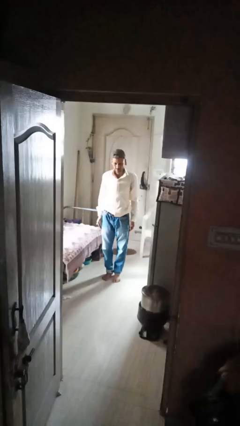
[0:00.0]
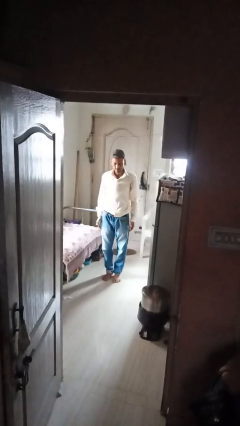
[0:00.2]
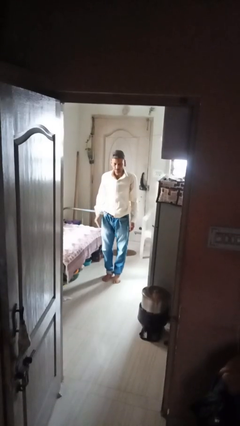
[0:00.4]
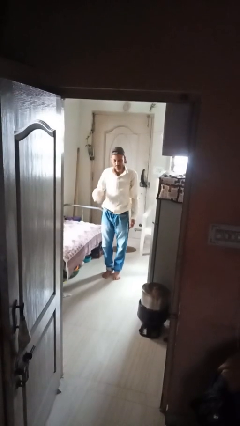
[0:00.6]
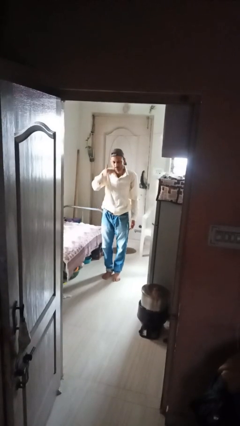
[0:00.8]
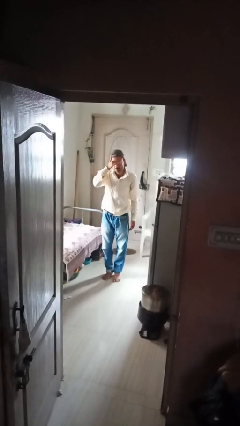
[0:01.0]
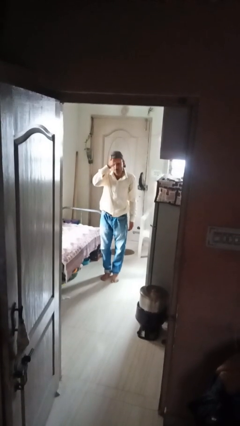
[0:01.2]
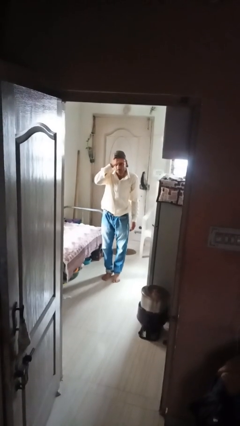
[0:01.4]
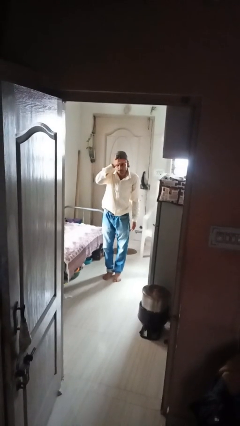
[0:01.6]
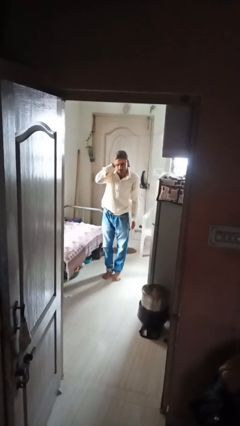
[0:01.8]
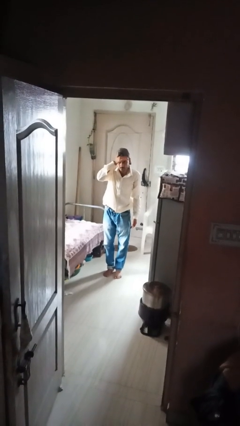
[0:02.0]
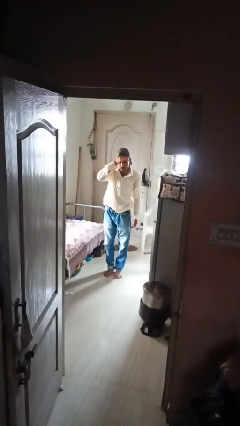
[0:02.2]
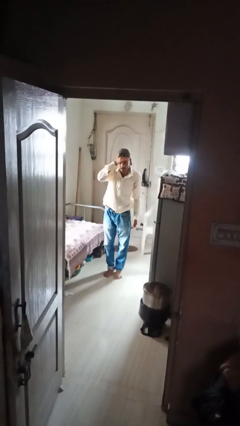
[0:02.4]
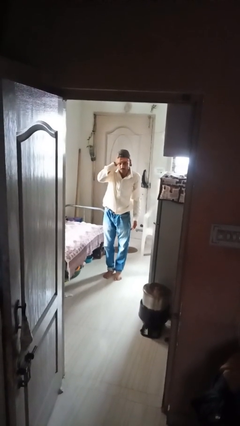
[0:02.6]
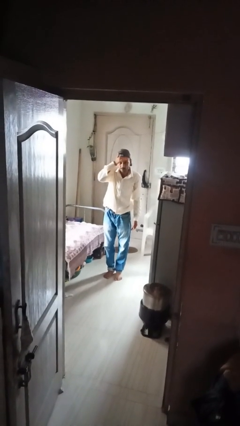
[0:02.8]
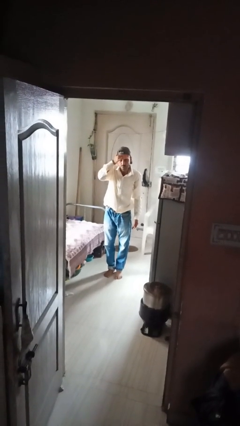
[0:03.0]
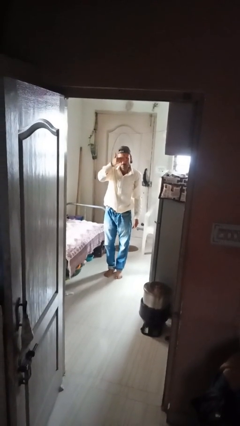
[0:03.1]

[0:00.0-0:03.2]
person shades eyes

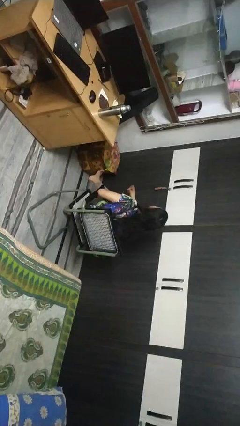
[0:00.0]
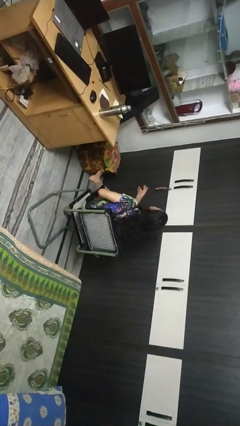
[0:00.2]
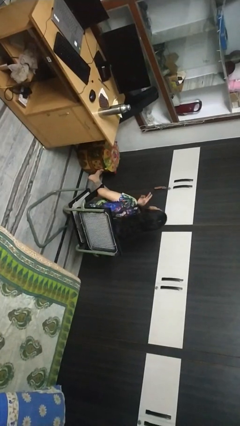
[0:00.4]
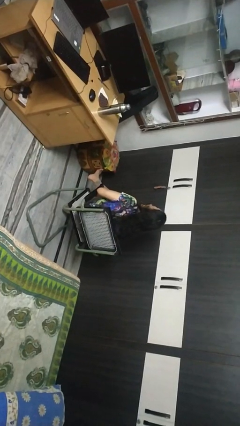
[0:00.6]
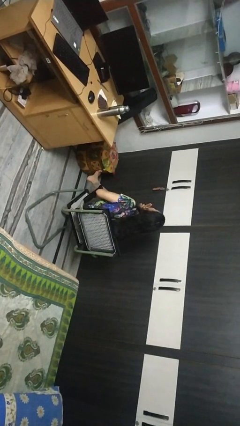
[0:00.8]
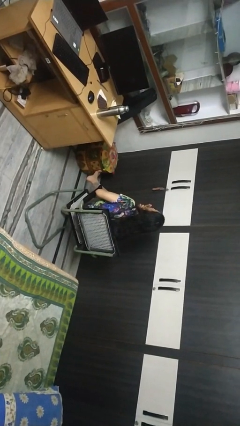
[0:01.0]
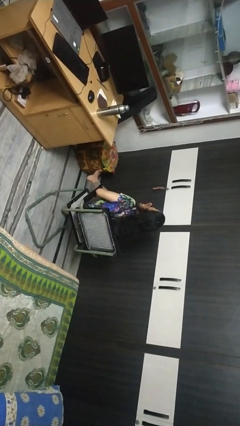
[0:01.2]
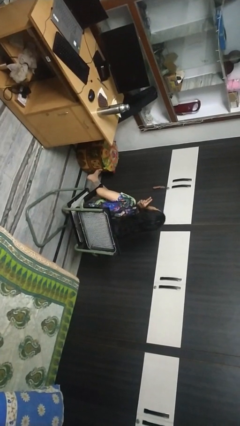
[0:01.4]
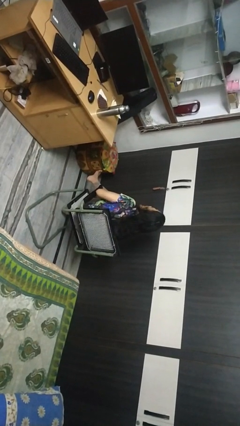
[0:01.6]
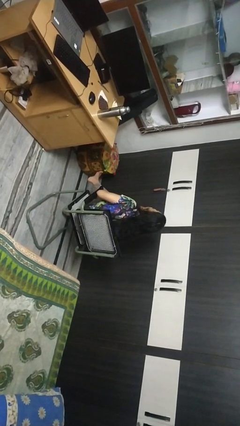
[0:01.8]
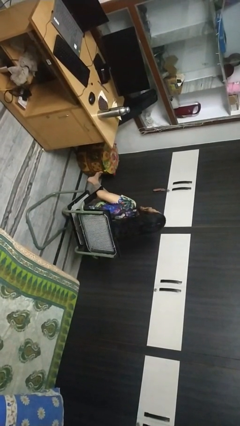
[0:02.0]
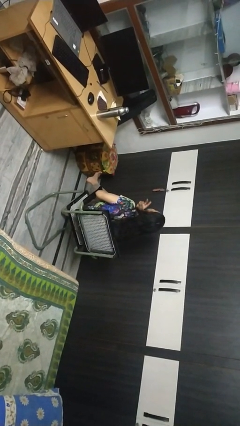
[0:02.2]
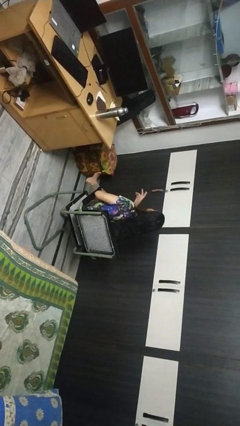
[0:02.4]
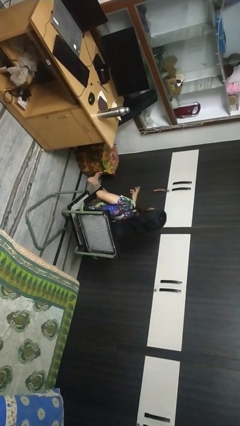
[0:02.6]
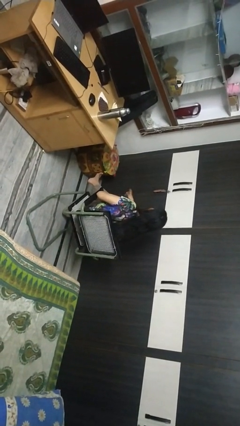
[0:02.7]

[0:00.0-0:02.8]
person strokes chin

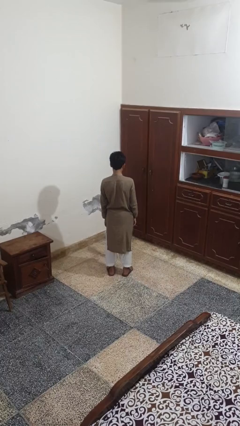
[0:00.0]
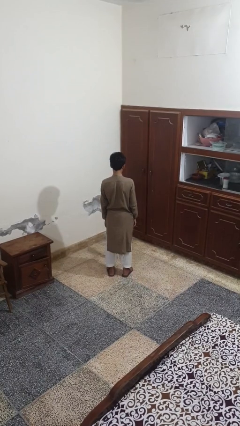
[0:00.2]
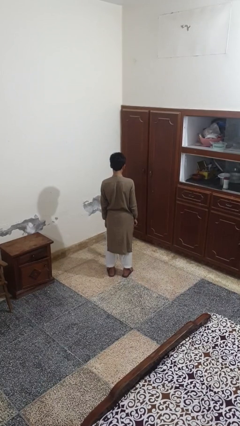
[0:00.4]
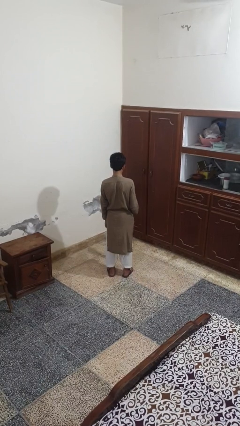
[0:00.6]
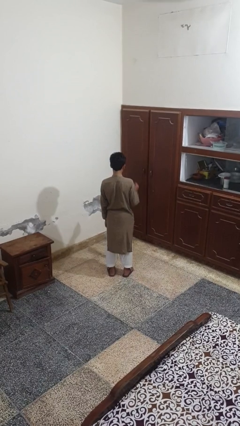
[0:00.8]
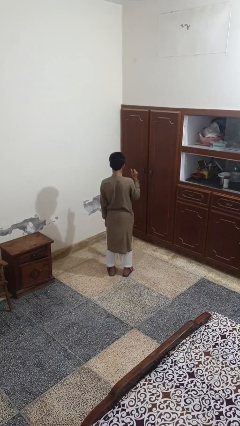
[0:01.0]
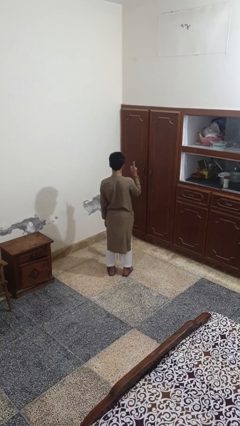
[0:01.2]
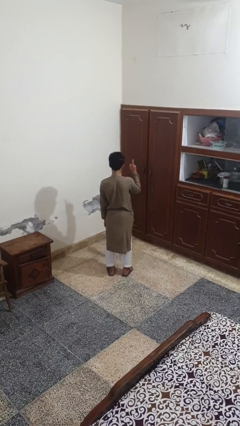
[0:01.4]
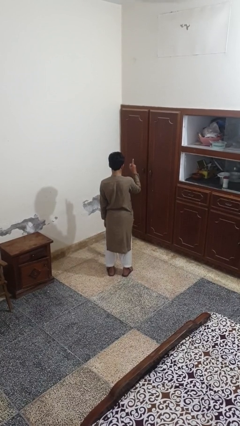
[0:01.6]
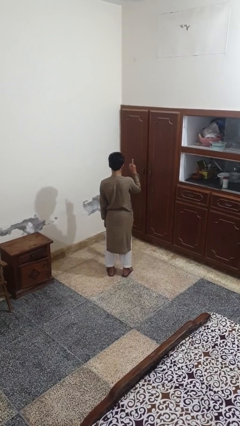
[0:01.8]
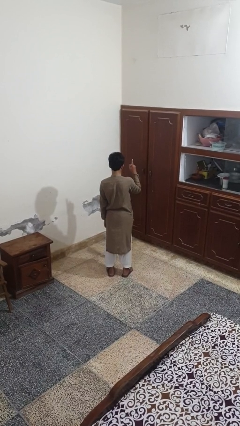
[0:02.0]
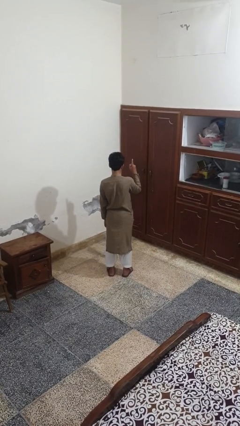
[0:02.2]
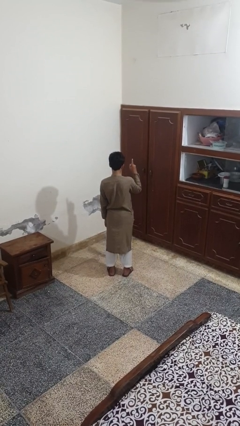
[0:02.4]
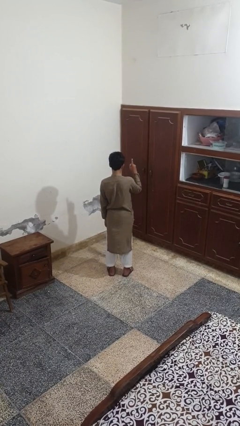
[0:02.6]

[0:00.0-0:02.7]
person gestures number one

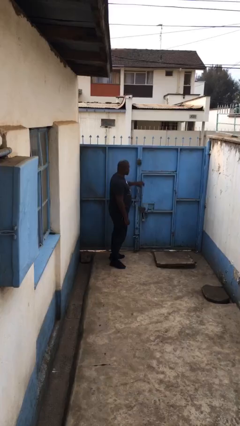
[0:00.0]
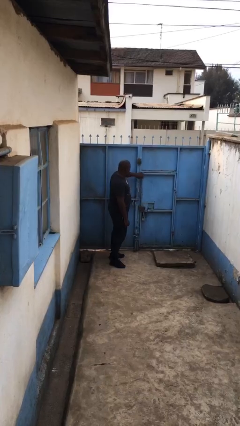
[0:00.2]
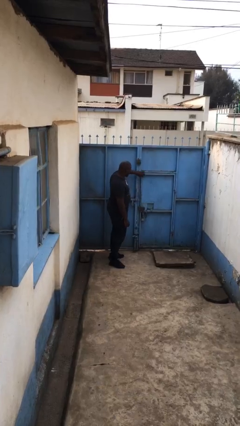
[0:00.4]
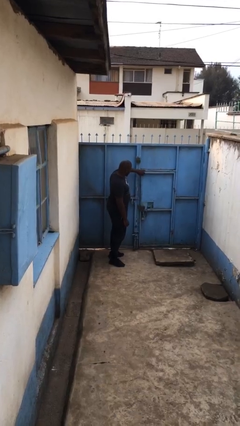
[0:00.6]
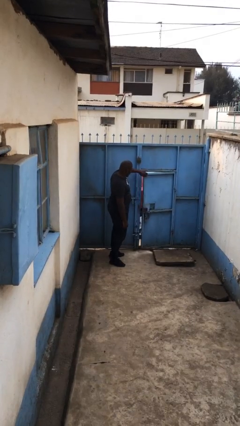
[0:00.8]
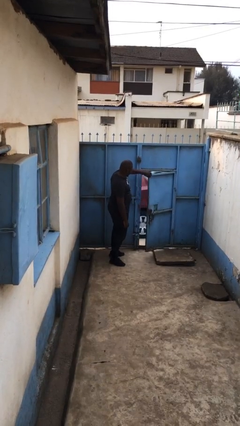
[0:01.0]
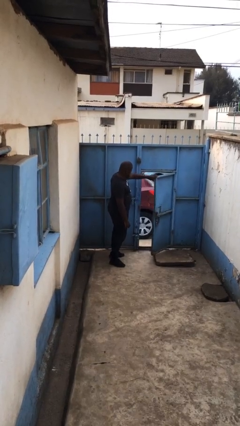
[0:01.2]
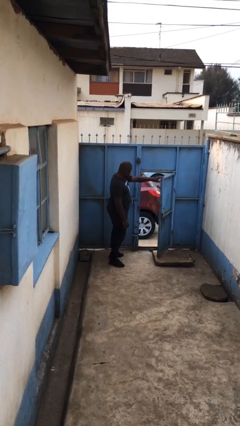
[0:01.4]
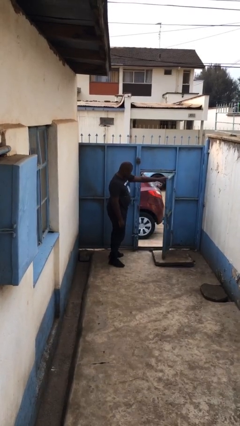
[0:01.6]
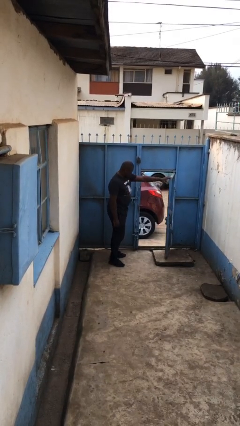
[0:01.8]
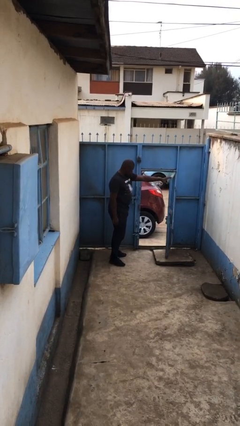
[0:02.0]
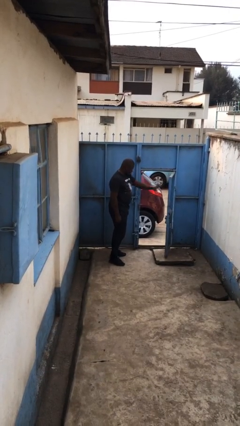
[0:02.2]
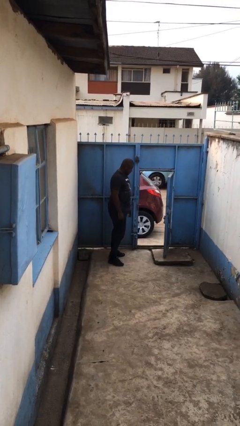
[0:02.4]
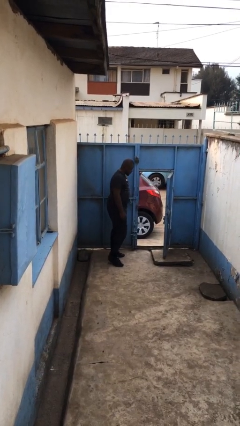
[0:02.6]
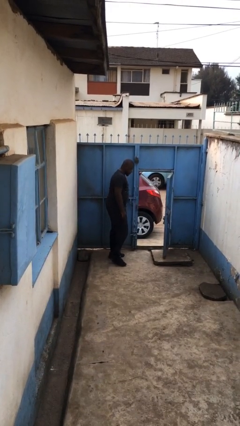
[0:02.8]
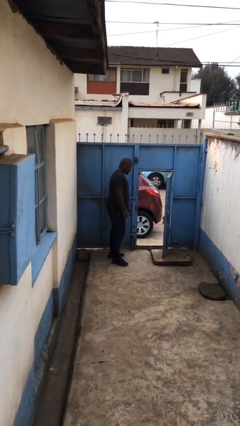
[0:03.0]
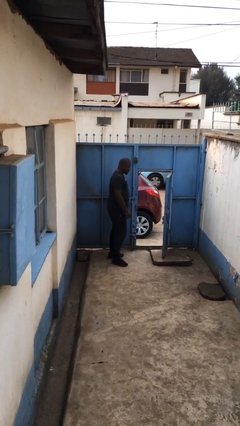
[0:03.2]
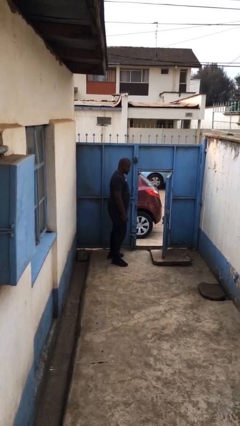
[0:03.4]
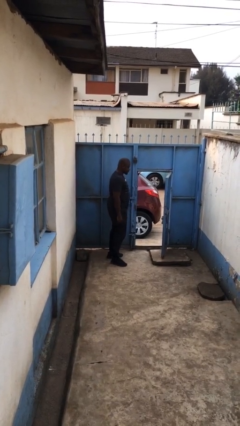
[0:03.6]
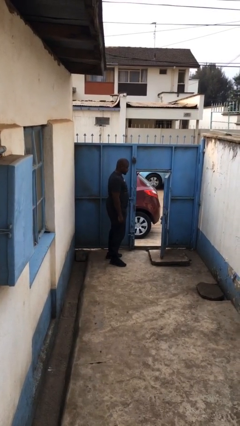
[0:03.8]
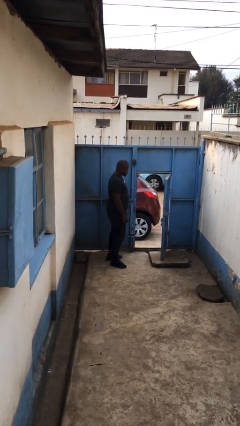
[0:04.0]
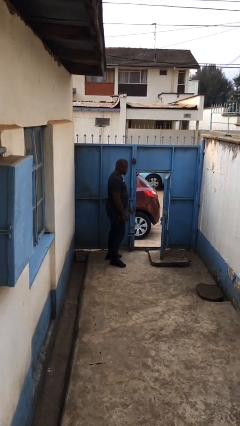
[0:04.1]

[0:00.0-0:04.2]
person opens gate

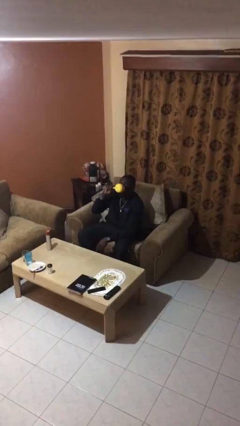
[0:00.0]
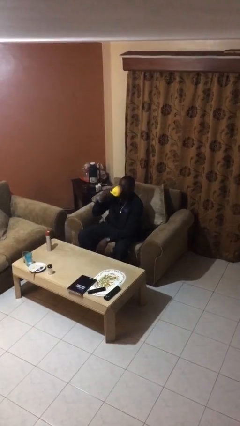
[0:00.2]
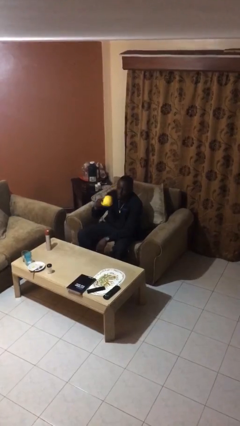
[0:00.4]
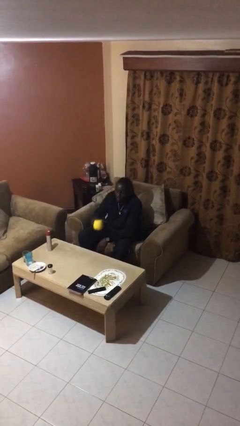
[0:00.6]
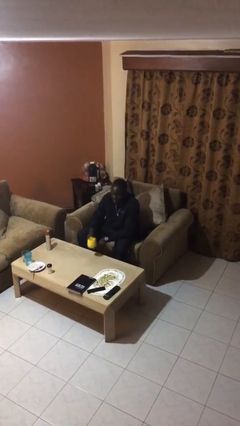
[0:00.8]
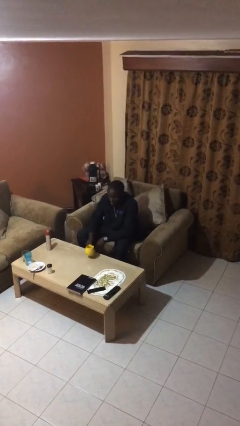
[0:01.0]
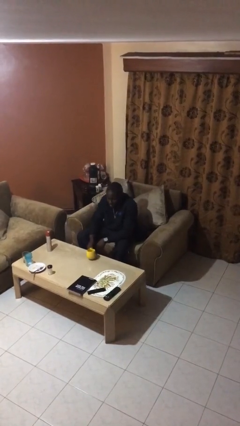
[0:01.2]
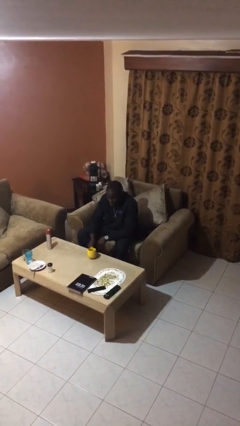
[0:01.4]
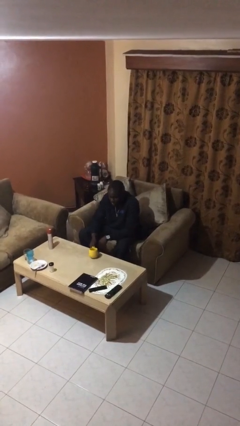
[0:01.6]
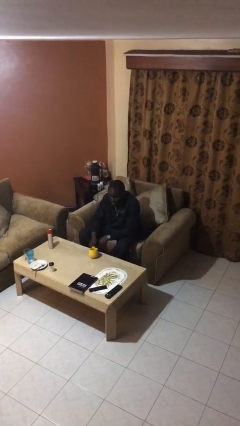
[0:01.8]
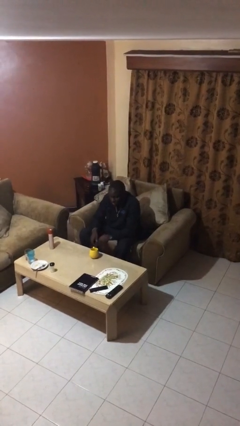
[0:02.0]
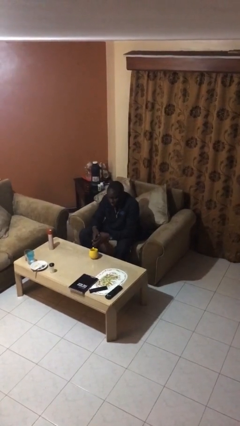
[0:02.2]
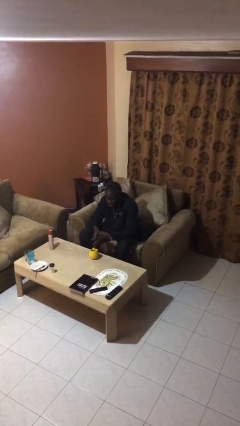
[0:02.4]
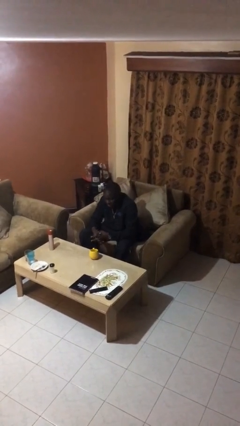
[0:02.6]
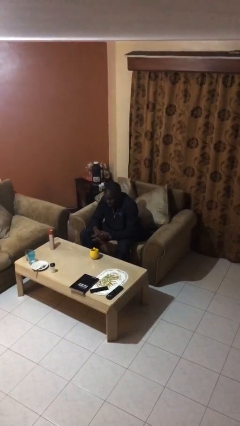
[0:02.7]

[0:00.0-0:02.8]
person puts down object on table

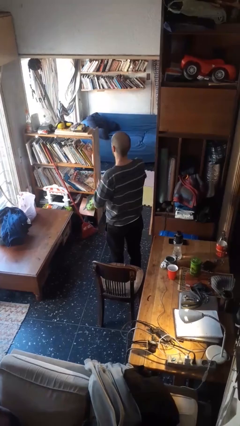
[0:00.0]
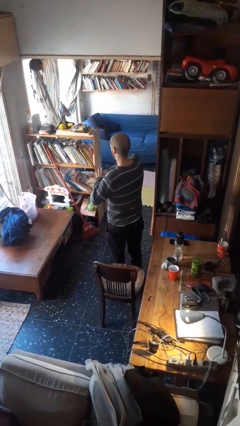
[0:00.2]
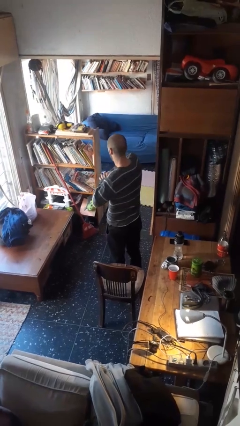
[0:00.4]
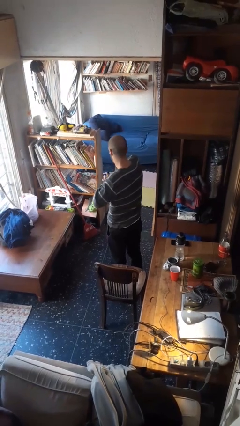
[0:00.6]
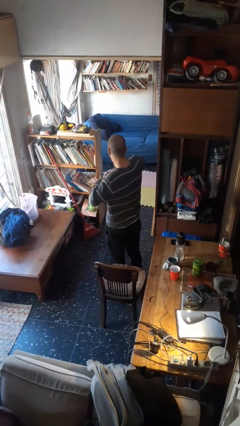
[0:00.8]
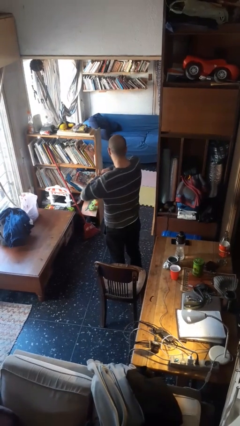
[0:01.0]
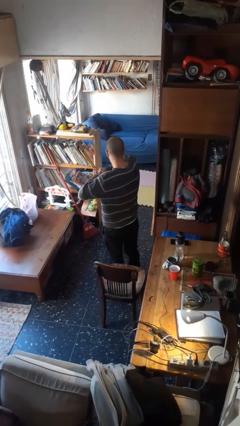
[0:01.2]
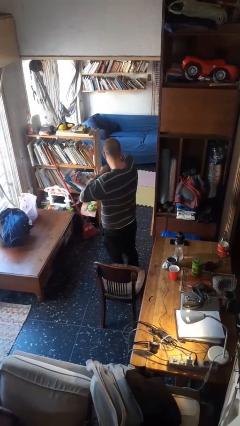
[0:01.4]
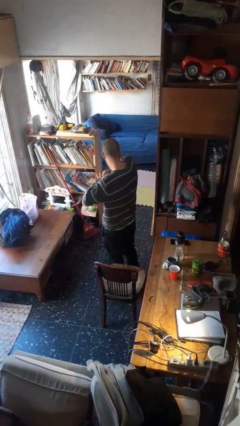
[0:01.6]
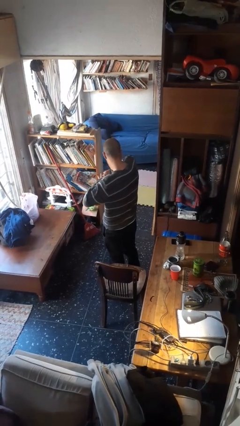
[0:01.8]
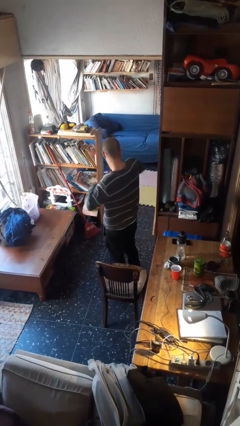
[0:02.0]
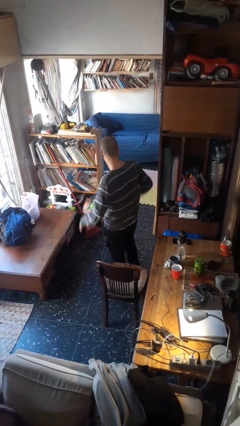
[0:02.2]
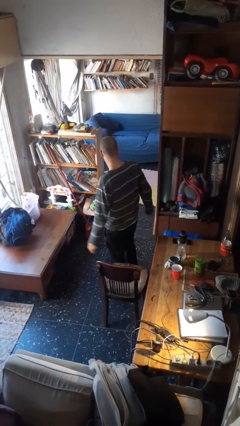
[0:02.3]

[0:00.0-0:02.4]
person snaps fingers
